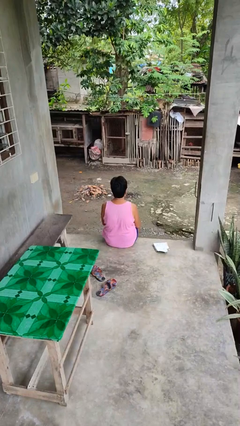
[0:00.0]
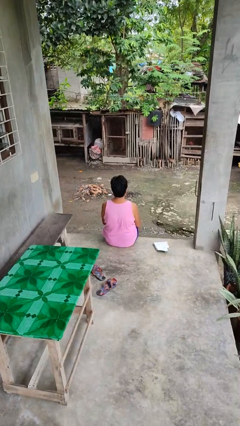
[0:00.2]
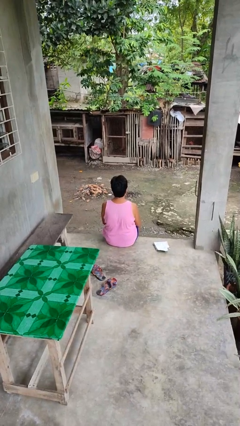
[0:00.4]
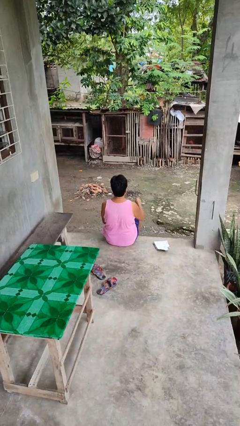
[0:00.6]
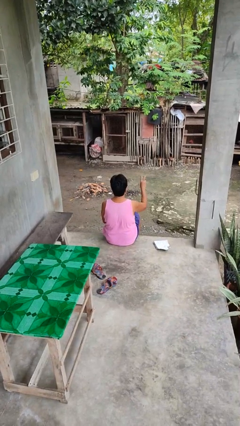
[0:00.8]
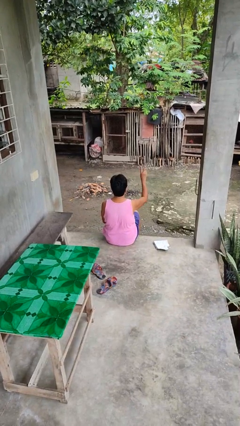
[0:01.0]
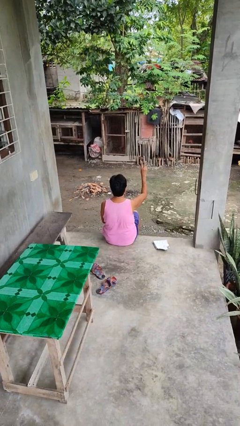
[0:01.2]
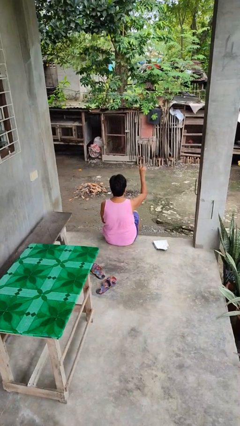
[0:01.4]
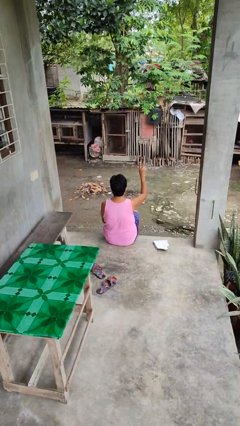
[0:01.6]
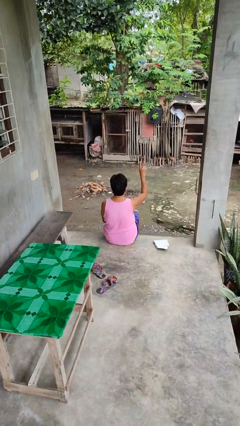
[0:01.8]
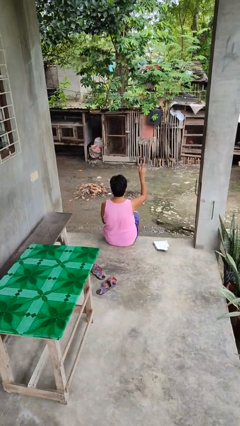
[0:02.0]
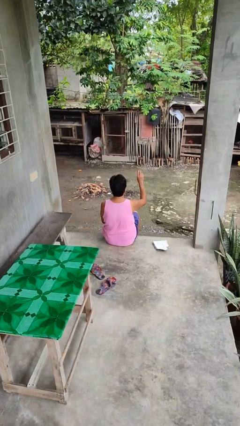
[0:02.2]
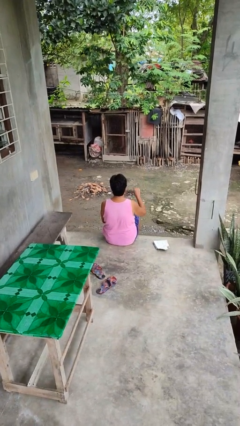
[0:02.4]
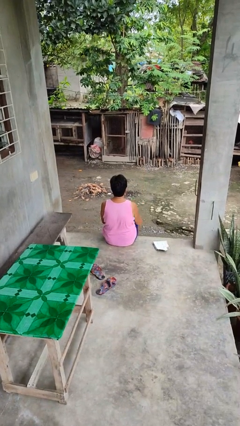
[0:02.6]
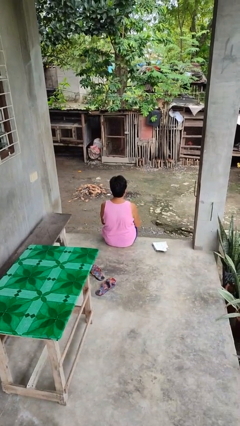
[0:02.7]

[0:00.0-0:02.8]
person gestures peace

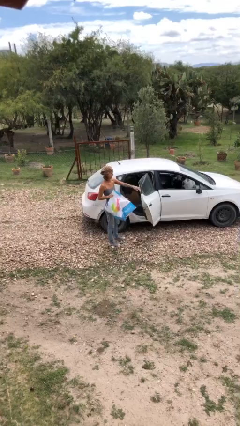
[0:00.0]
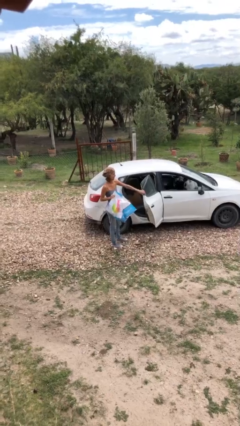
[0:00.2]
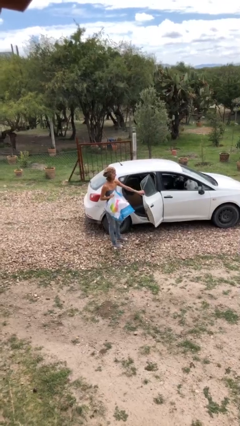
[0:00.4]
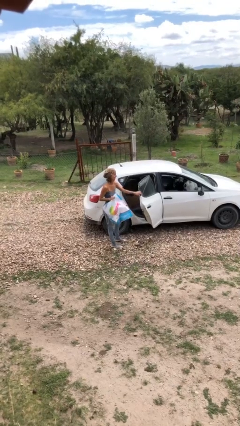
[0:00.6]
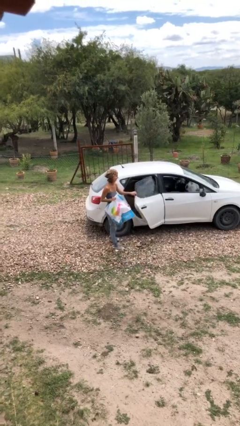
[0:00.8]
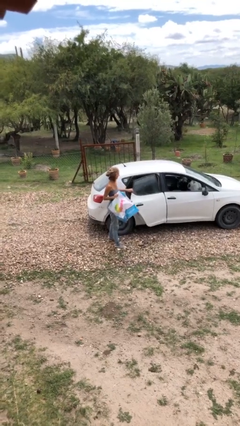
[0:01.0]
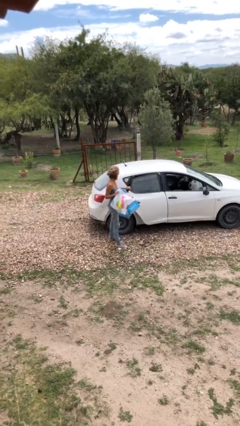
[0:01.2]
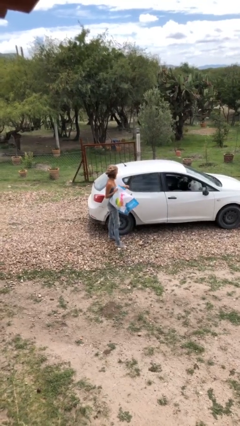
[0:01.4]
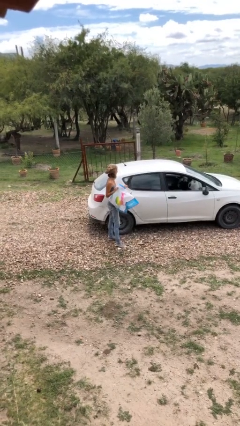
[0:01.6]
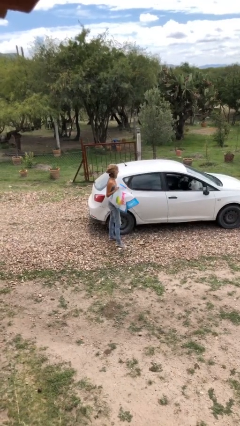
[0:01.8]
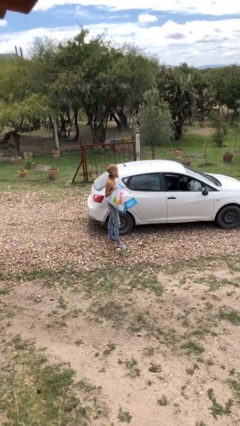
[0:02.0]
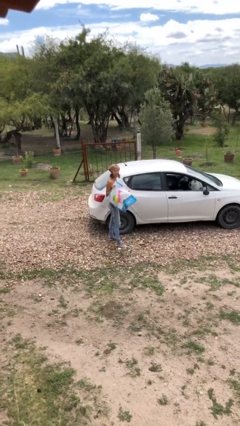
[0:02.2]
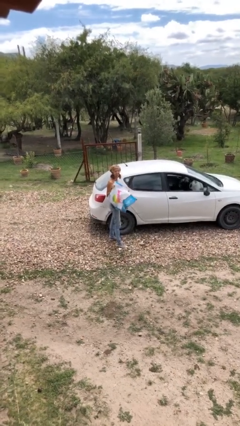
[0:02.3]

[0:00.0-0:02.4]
person closes car door

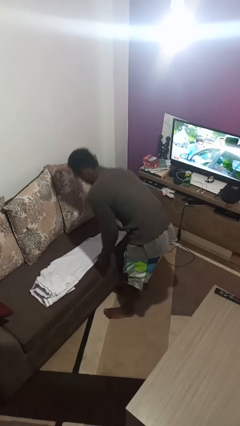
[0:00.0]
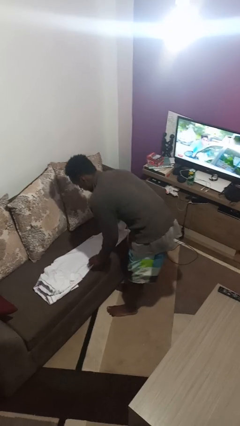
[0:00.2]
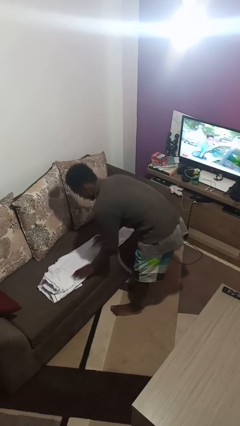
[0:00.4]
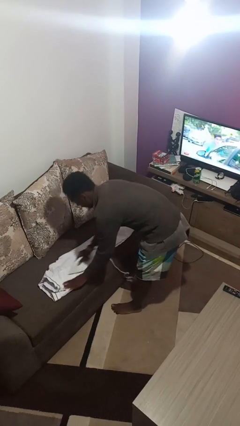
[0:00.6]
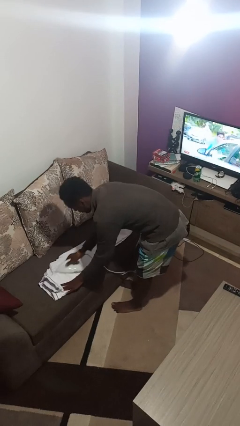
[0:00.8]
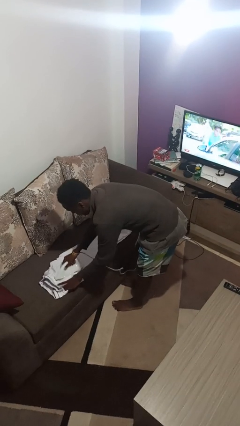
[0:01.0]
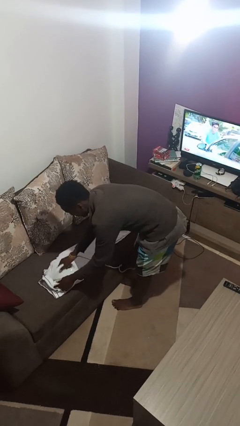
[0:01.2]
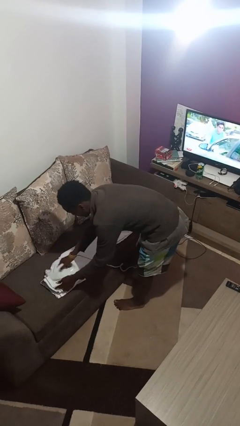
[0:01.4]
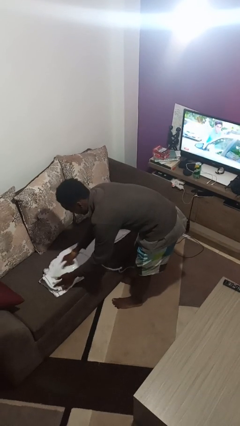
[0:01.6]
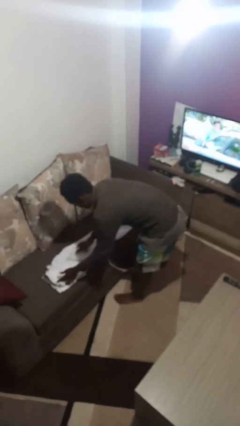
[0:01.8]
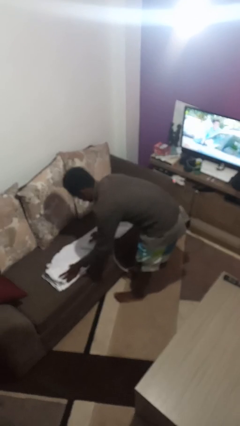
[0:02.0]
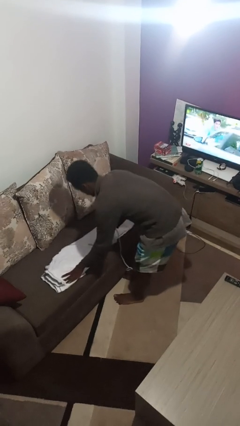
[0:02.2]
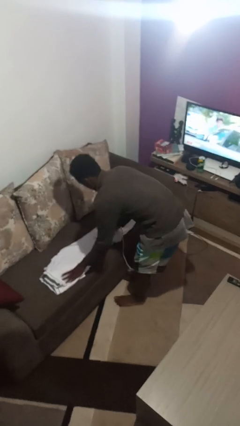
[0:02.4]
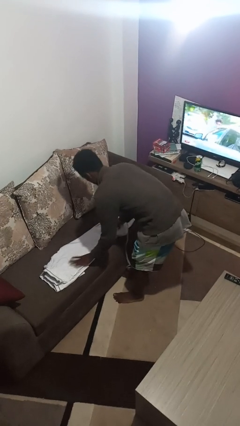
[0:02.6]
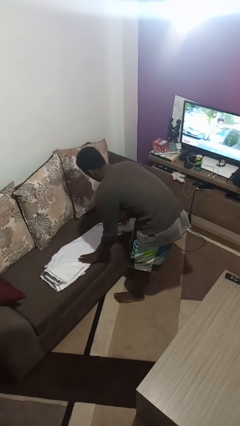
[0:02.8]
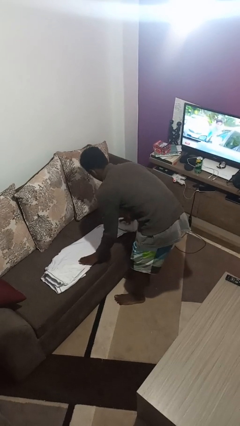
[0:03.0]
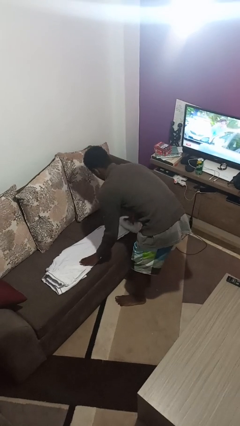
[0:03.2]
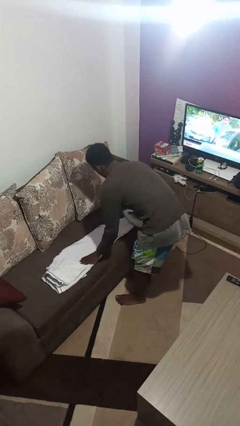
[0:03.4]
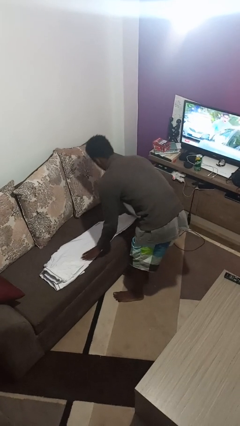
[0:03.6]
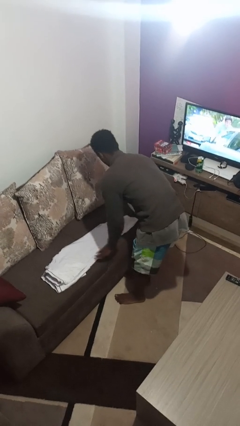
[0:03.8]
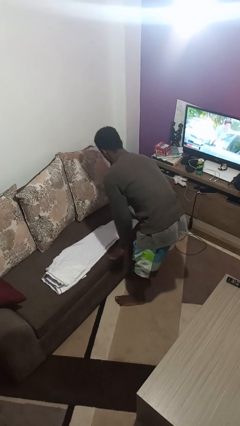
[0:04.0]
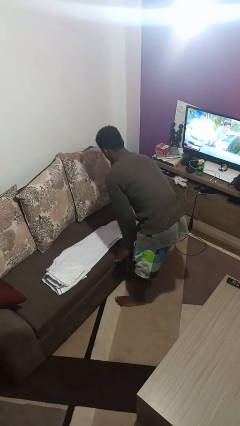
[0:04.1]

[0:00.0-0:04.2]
person irons clothes

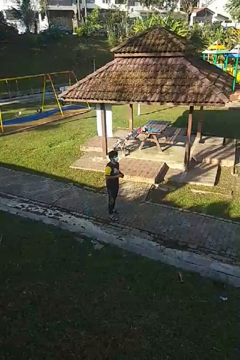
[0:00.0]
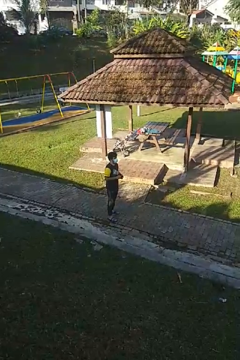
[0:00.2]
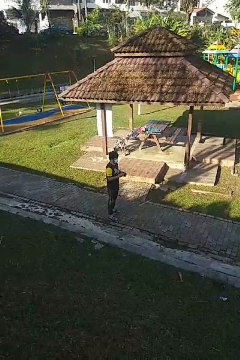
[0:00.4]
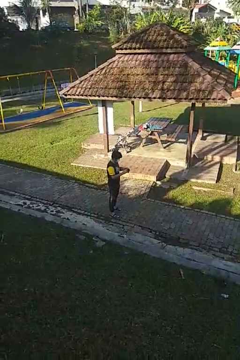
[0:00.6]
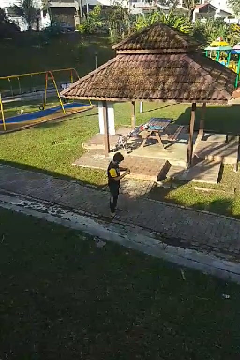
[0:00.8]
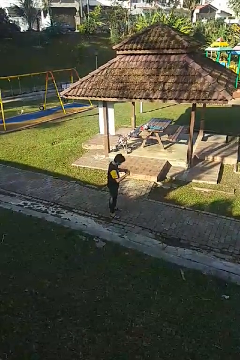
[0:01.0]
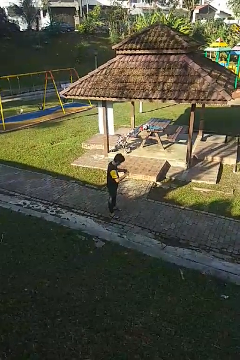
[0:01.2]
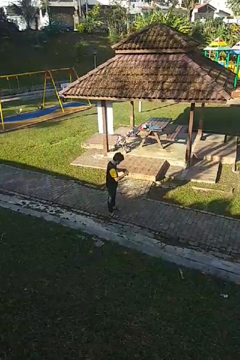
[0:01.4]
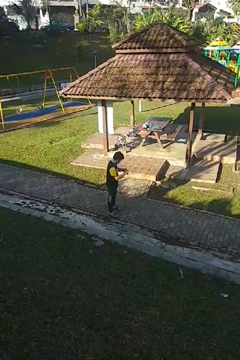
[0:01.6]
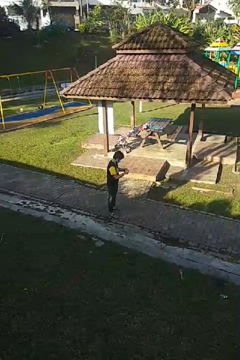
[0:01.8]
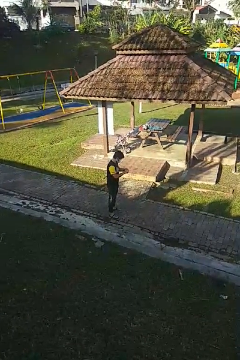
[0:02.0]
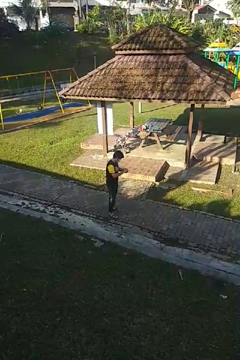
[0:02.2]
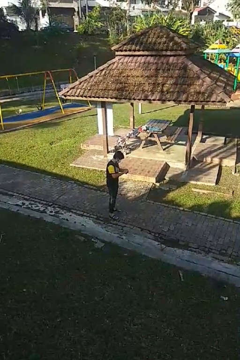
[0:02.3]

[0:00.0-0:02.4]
person searches in purse

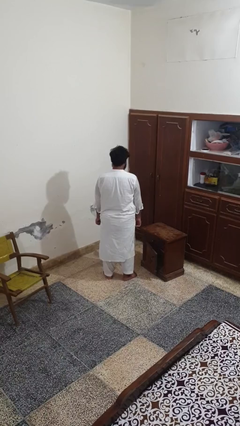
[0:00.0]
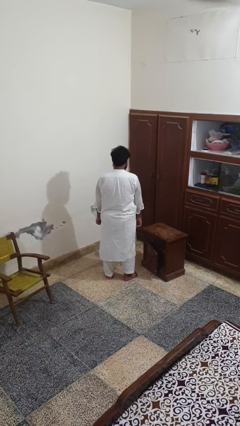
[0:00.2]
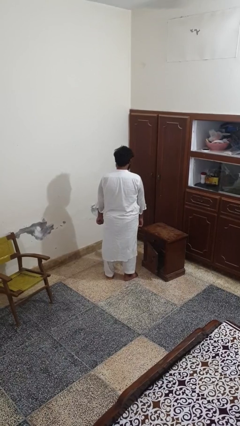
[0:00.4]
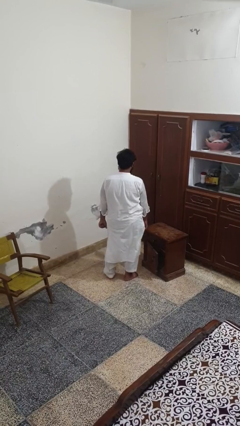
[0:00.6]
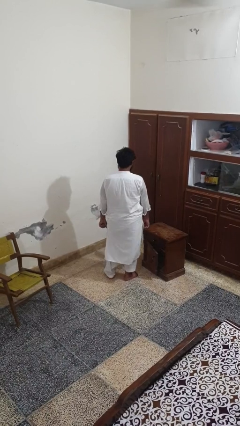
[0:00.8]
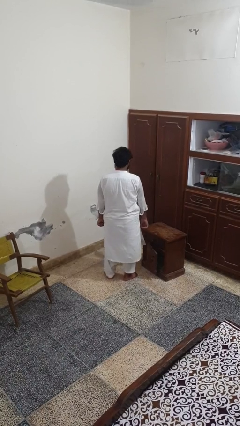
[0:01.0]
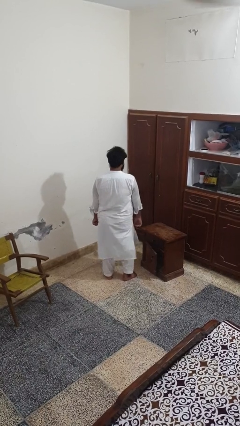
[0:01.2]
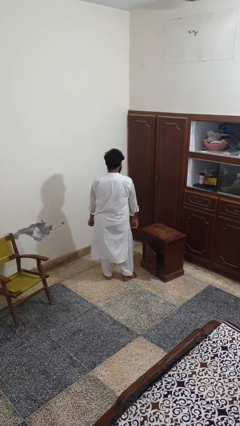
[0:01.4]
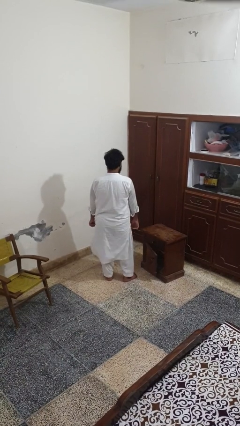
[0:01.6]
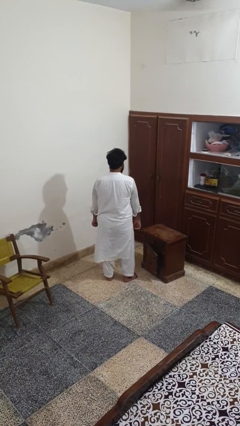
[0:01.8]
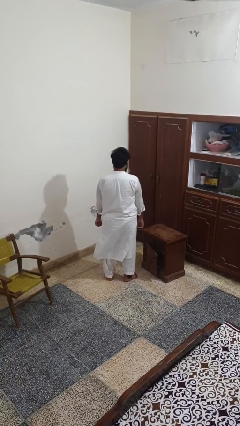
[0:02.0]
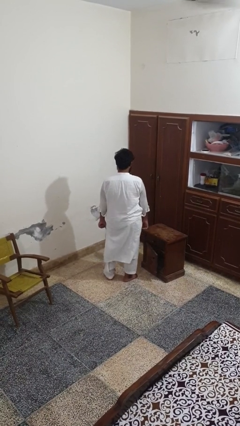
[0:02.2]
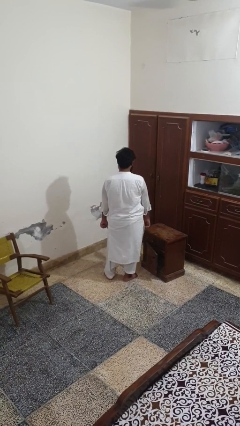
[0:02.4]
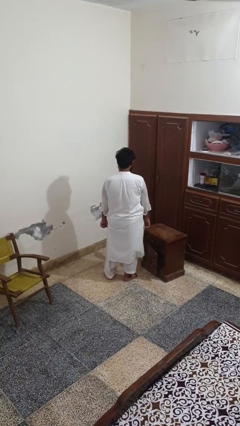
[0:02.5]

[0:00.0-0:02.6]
person wiggles hips

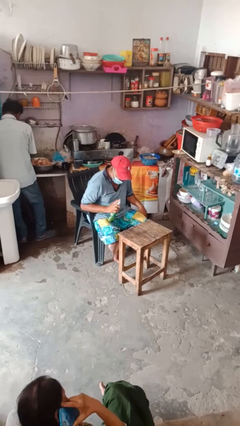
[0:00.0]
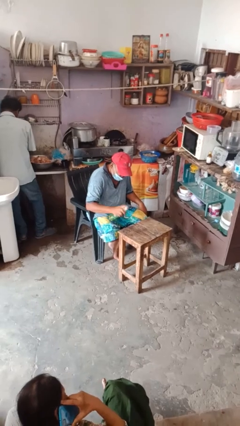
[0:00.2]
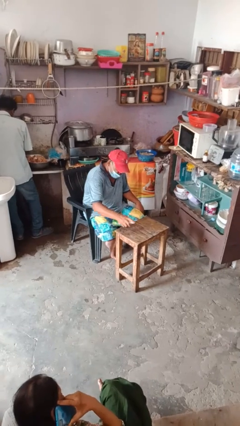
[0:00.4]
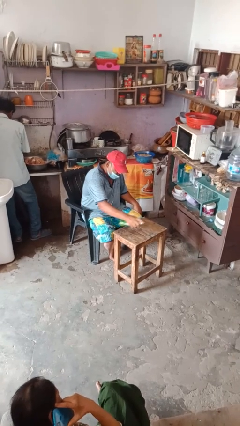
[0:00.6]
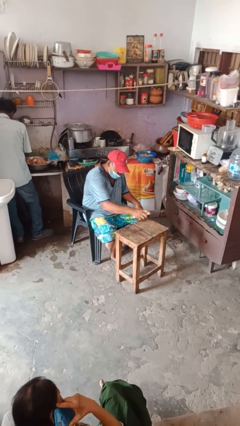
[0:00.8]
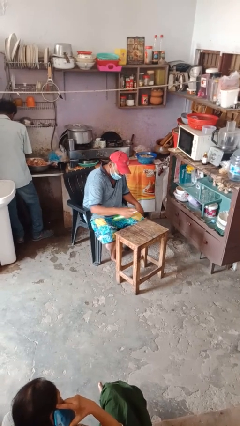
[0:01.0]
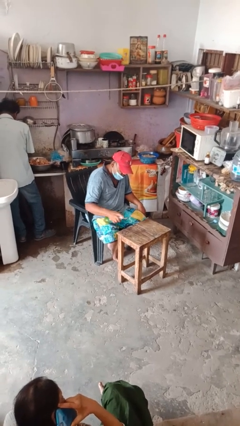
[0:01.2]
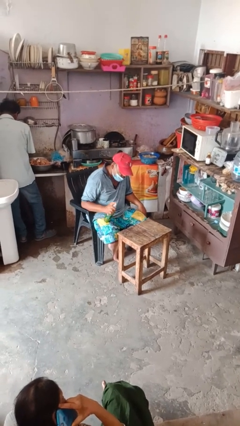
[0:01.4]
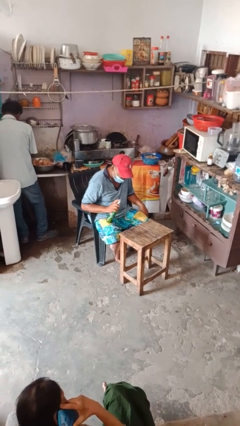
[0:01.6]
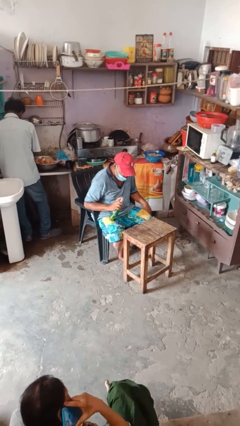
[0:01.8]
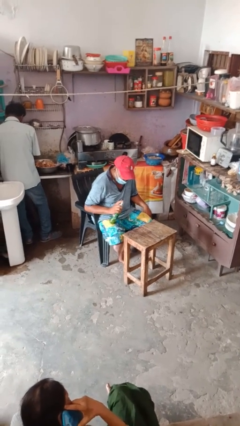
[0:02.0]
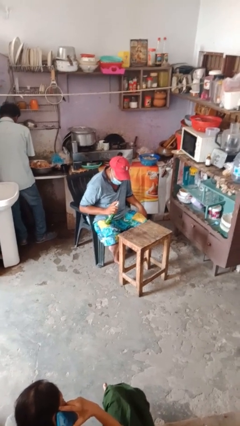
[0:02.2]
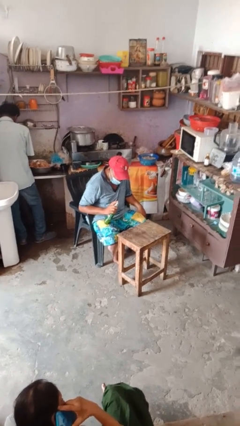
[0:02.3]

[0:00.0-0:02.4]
person sprays from bottle

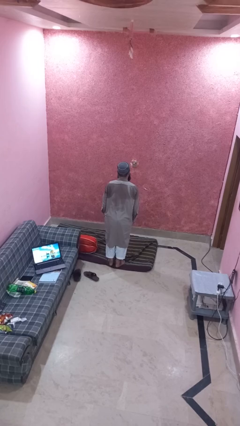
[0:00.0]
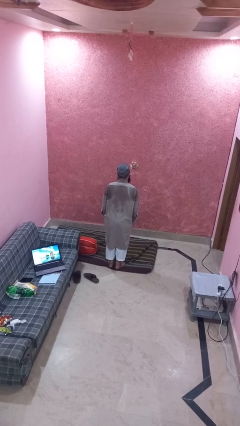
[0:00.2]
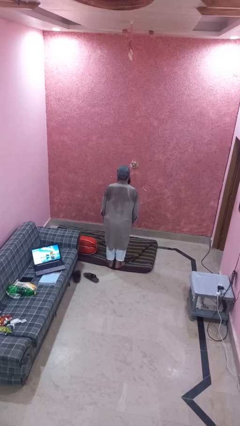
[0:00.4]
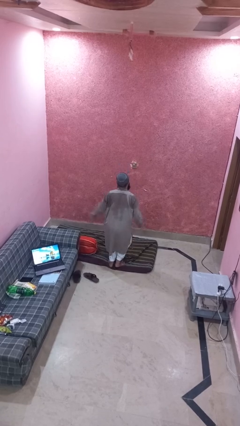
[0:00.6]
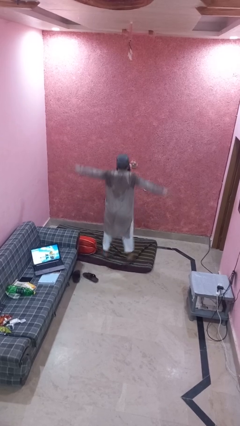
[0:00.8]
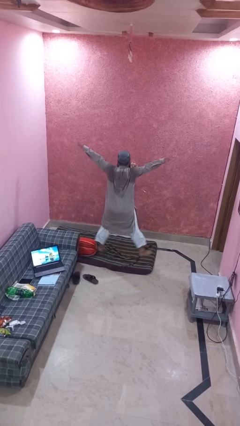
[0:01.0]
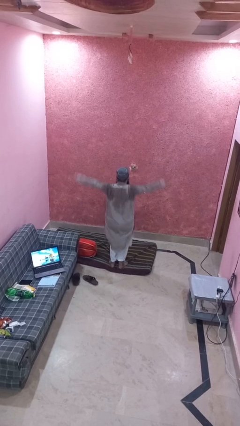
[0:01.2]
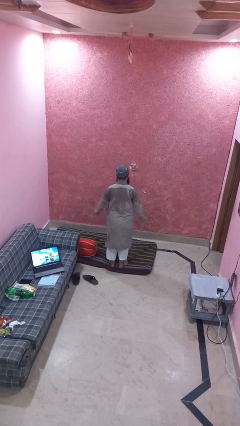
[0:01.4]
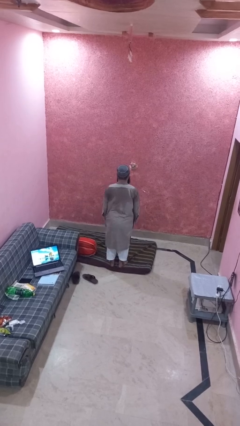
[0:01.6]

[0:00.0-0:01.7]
person exercises with jumping jacks
